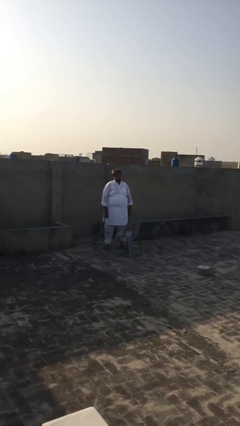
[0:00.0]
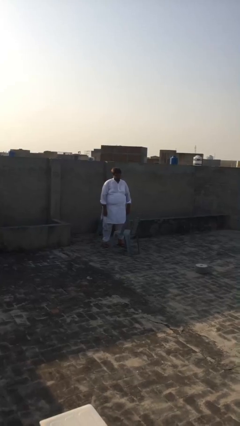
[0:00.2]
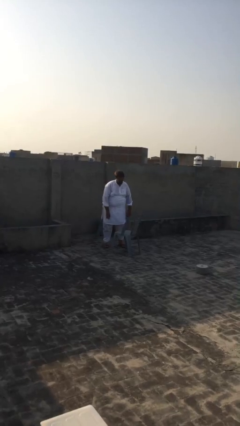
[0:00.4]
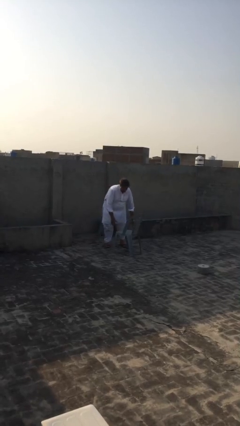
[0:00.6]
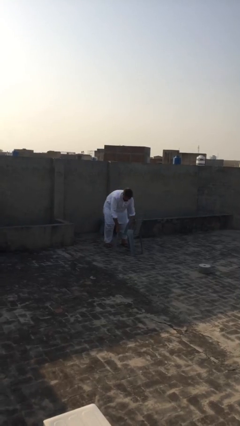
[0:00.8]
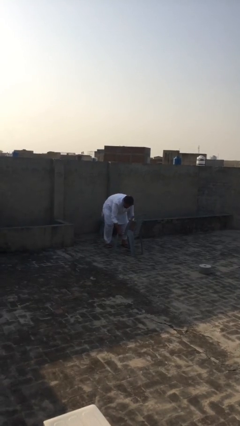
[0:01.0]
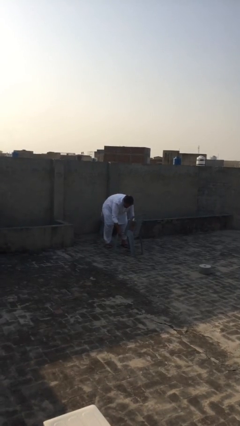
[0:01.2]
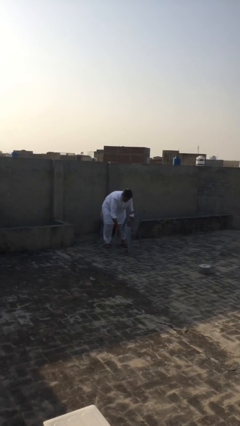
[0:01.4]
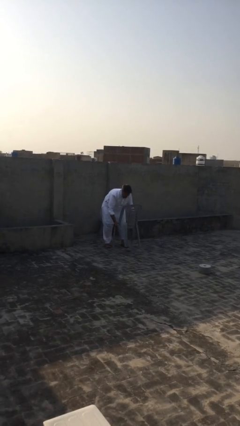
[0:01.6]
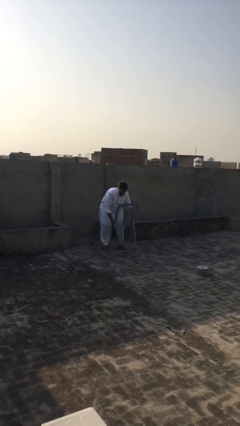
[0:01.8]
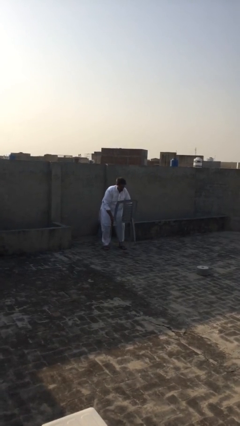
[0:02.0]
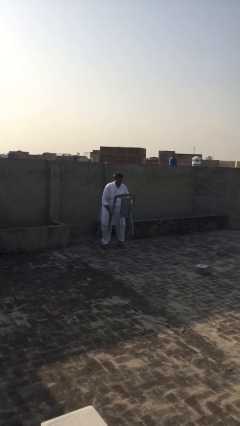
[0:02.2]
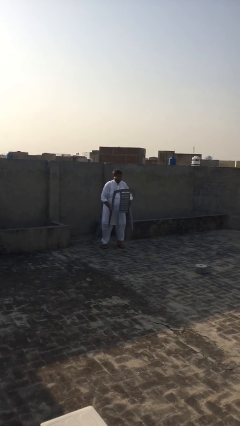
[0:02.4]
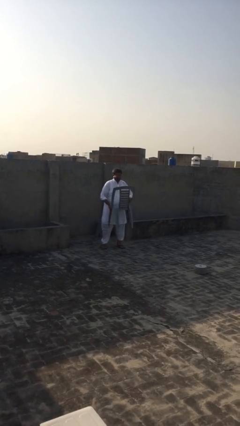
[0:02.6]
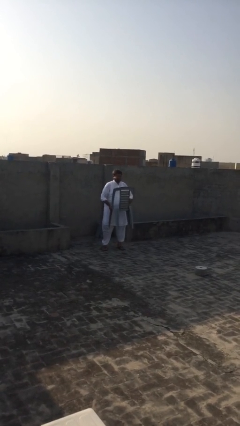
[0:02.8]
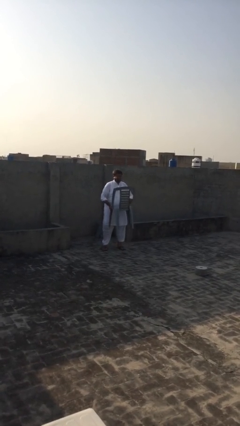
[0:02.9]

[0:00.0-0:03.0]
person picks up object from floor

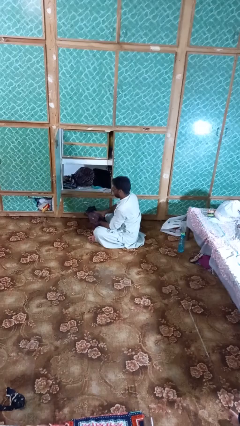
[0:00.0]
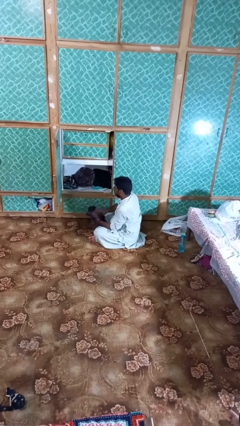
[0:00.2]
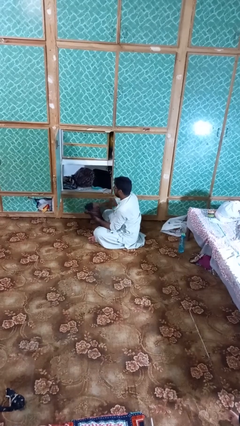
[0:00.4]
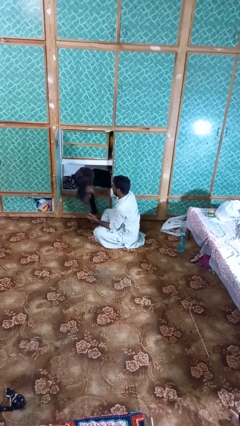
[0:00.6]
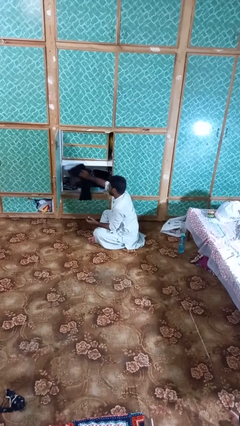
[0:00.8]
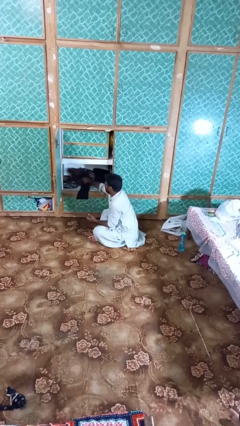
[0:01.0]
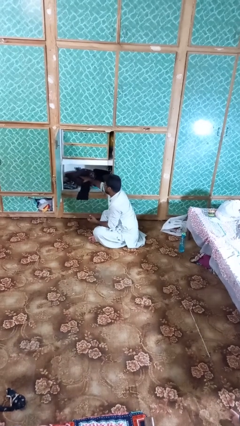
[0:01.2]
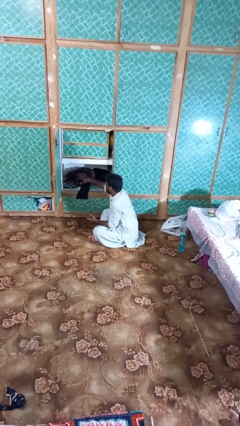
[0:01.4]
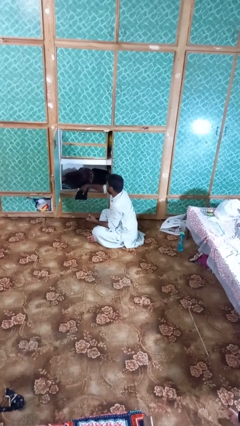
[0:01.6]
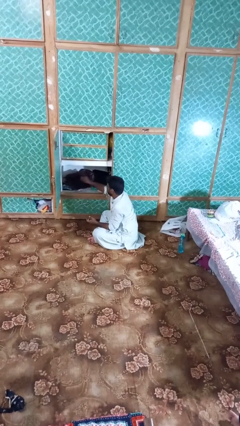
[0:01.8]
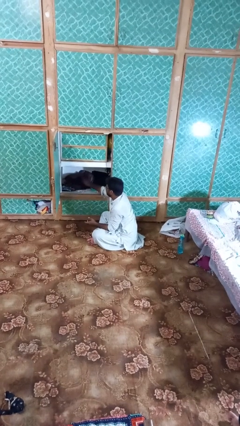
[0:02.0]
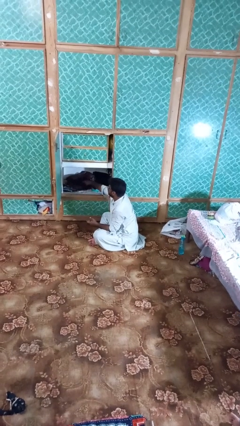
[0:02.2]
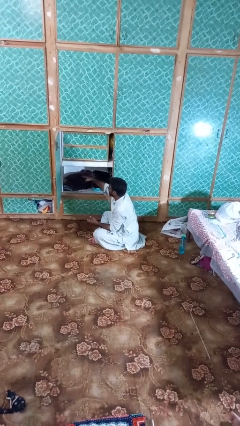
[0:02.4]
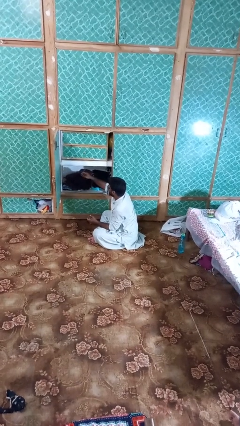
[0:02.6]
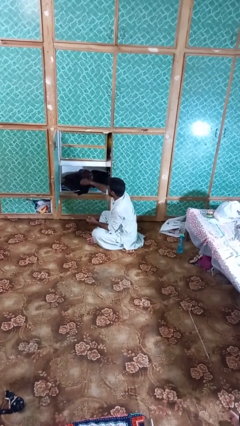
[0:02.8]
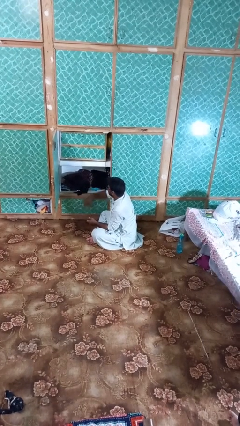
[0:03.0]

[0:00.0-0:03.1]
person puts clothes into dresser

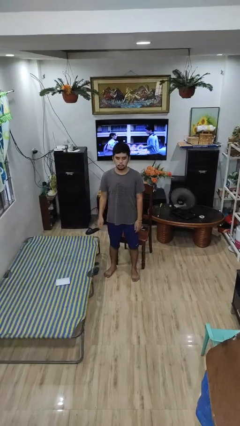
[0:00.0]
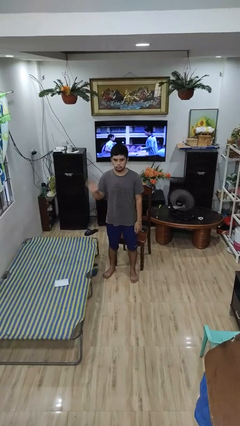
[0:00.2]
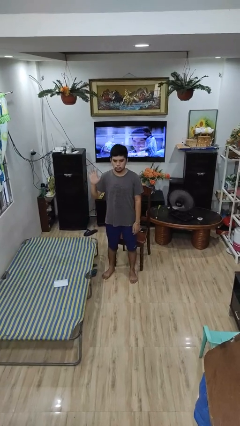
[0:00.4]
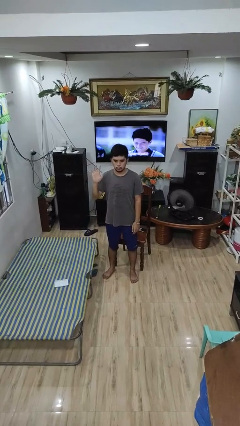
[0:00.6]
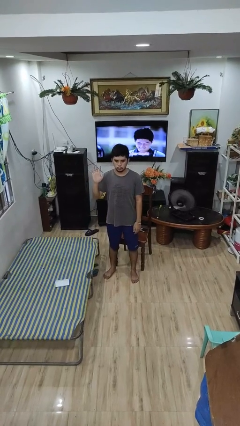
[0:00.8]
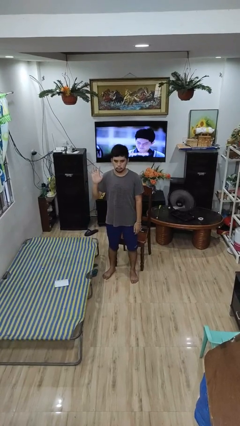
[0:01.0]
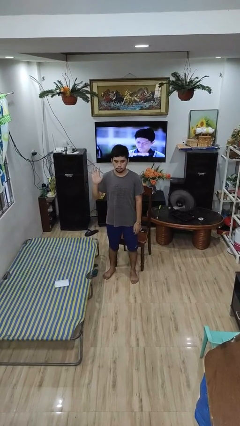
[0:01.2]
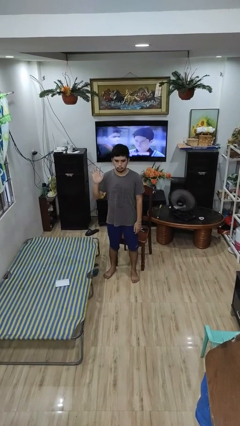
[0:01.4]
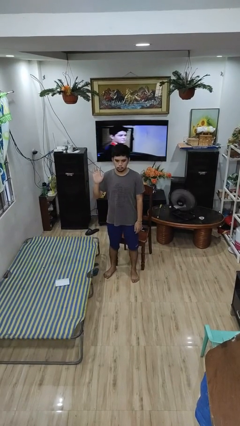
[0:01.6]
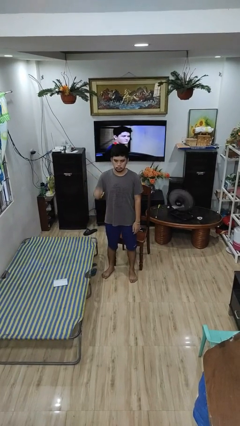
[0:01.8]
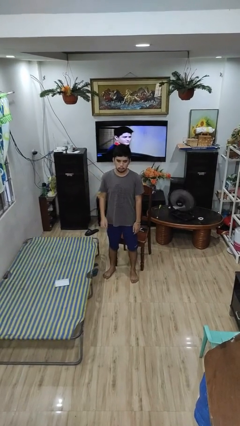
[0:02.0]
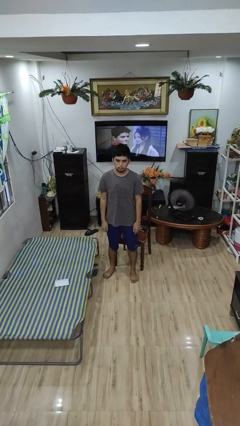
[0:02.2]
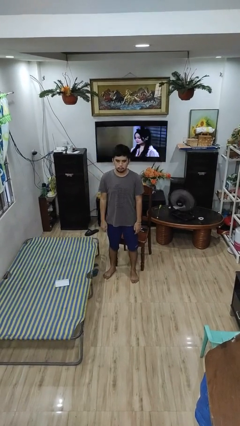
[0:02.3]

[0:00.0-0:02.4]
person gestures number five

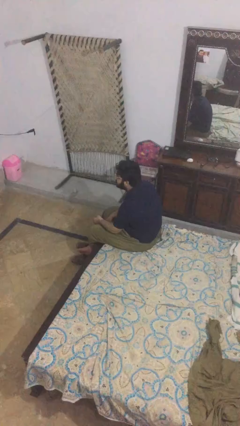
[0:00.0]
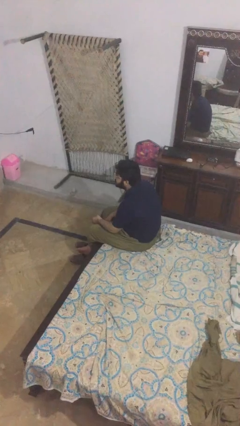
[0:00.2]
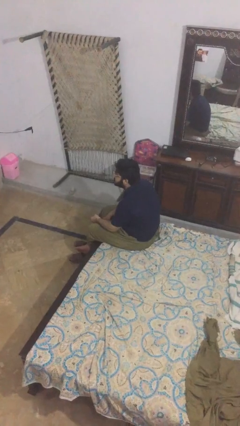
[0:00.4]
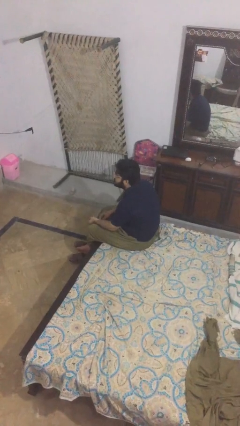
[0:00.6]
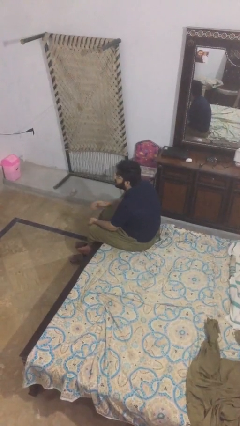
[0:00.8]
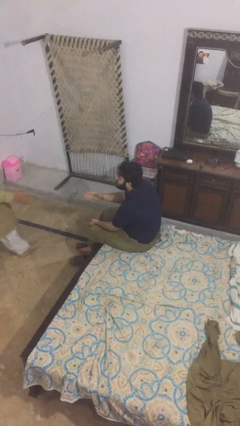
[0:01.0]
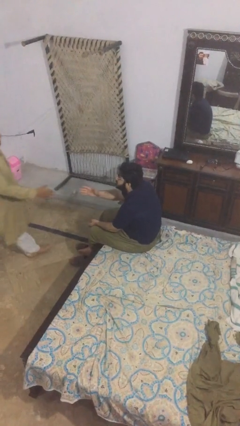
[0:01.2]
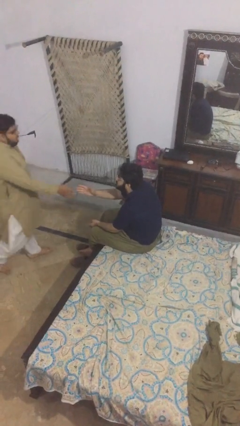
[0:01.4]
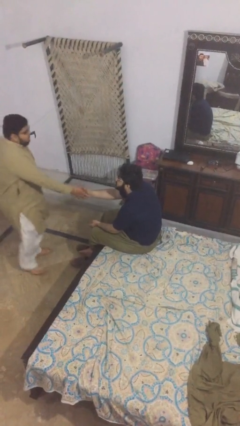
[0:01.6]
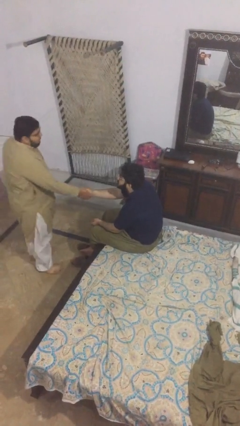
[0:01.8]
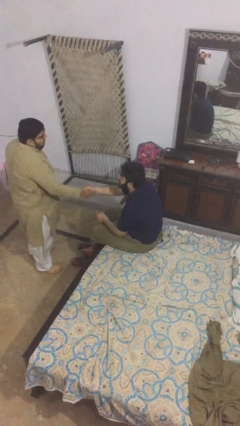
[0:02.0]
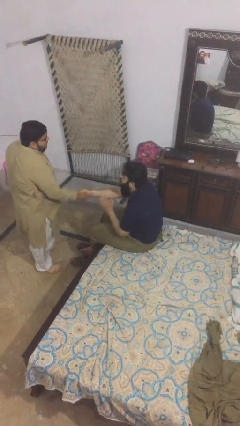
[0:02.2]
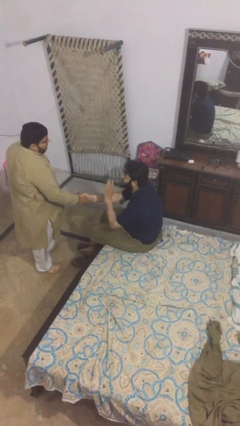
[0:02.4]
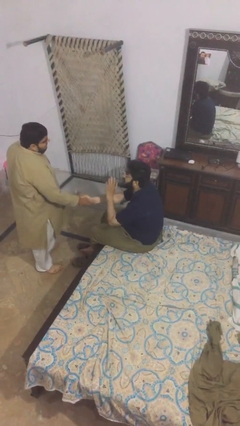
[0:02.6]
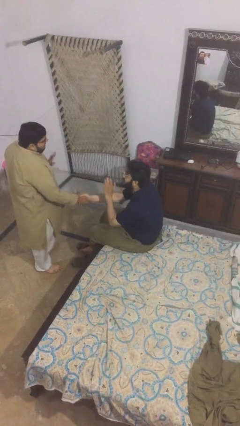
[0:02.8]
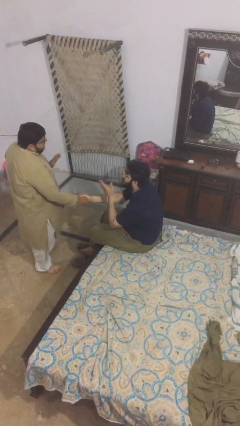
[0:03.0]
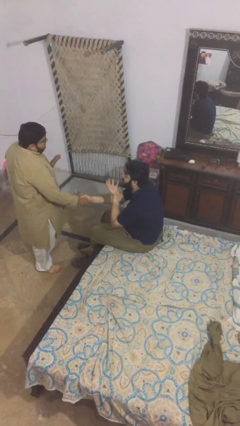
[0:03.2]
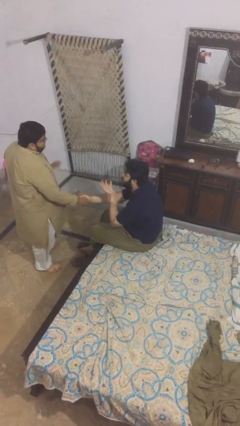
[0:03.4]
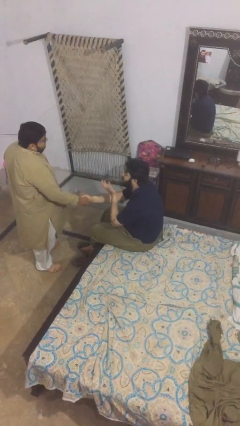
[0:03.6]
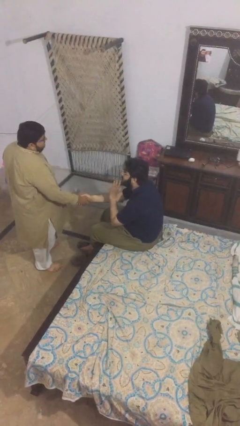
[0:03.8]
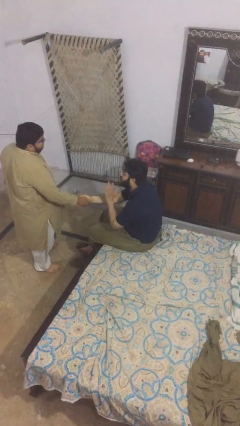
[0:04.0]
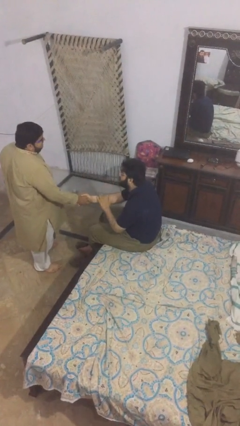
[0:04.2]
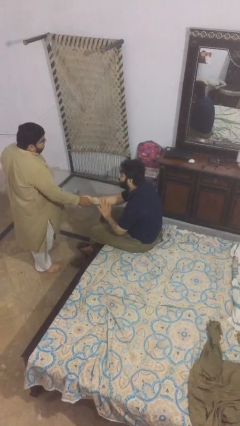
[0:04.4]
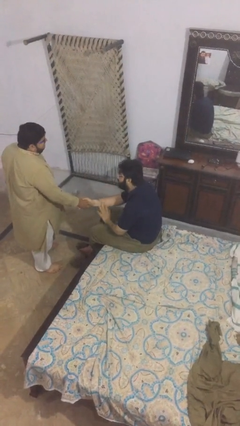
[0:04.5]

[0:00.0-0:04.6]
person shakes hand

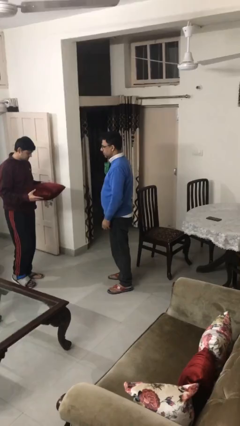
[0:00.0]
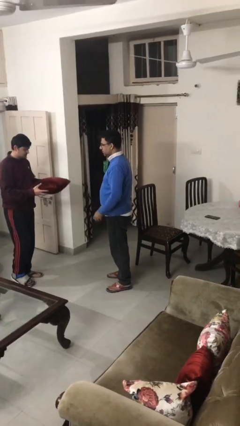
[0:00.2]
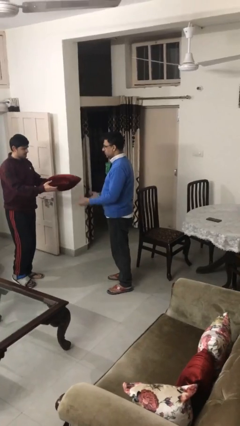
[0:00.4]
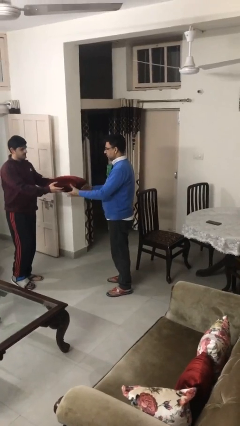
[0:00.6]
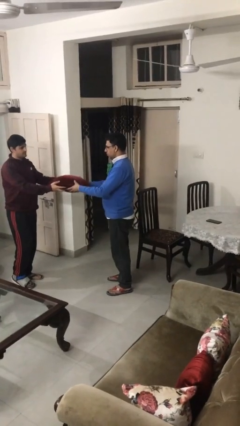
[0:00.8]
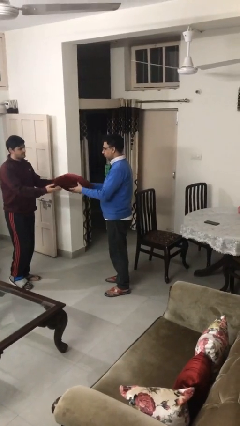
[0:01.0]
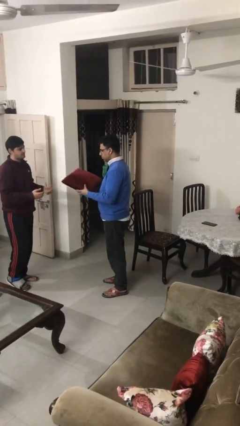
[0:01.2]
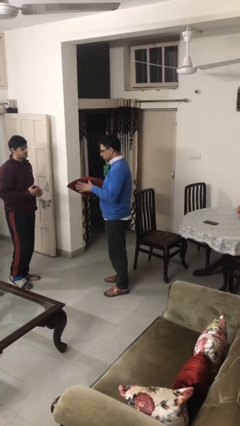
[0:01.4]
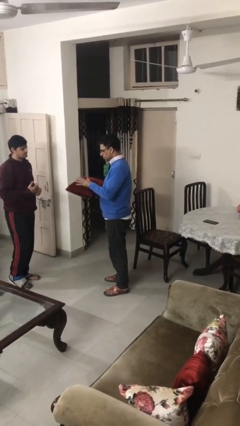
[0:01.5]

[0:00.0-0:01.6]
person transfers object to person

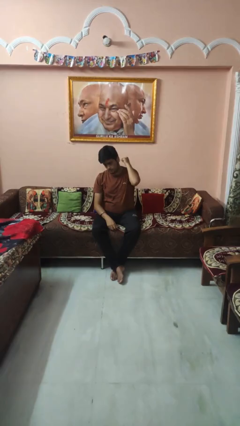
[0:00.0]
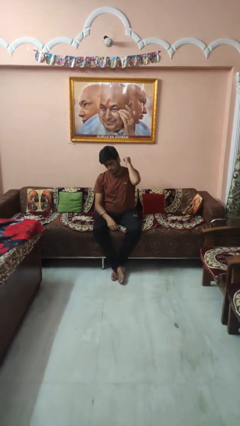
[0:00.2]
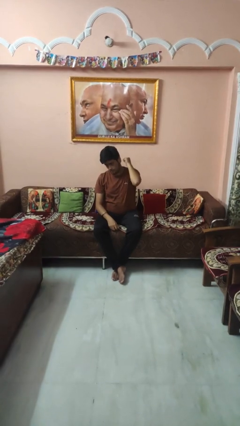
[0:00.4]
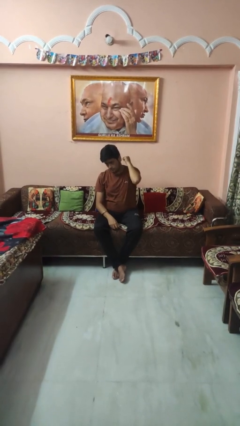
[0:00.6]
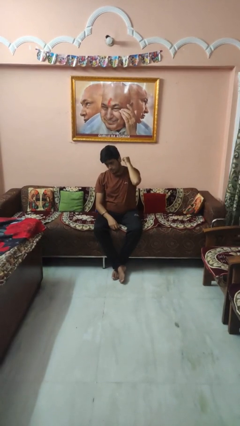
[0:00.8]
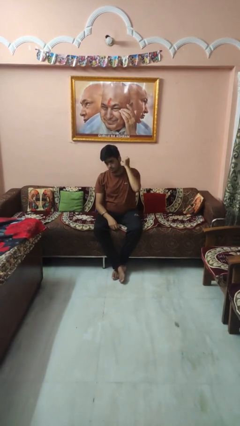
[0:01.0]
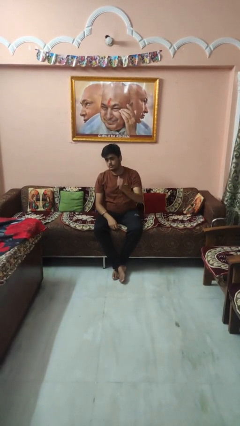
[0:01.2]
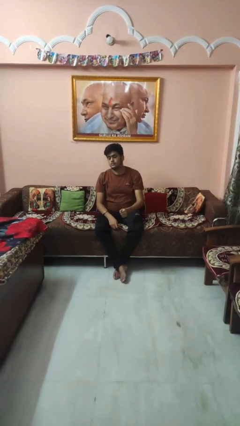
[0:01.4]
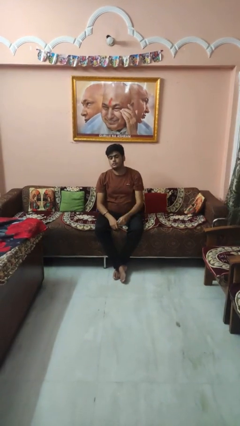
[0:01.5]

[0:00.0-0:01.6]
person gestures behind me

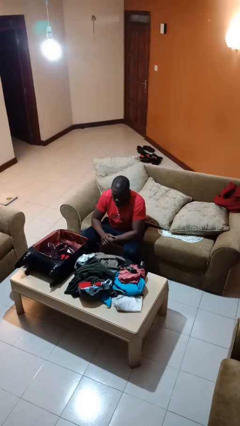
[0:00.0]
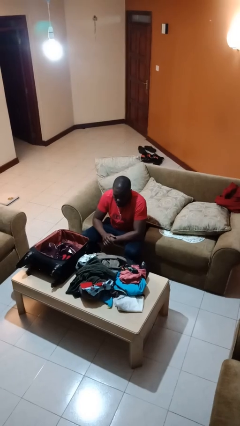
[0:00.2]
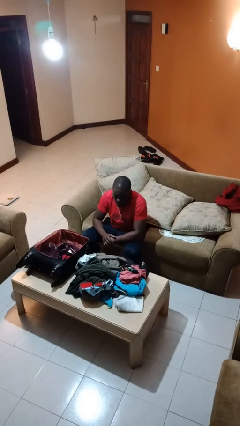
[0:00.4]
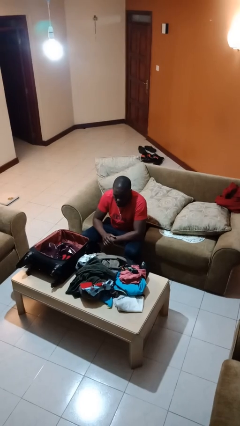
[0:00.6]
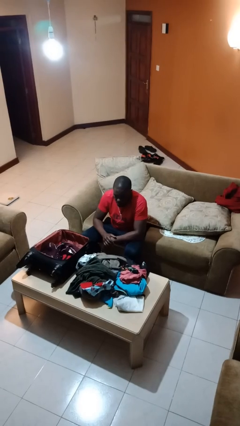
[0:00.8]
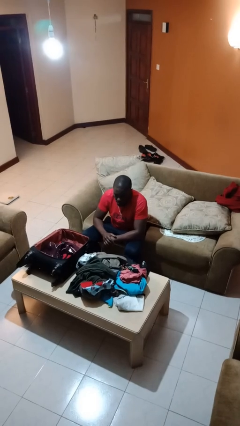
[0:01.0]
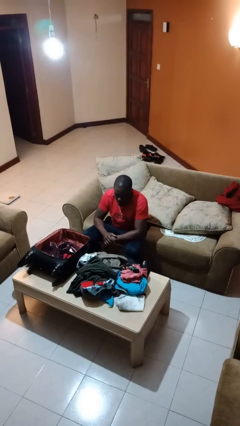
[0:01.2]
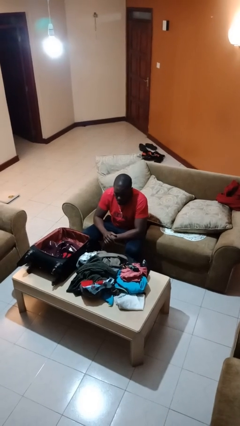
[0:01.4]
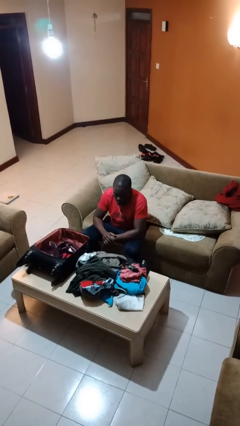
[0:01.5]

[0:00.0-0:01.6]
person loads clothes into suitcase
